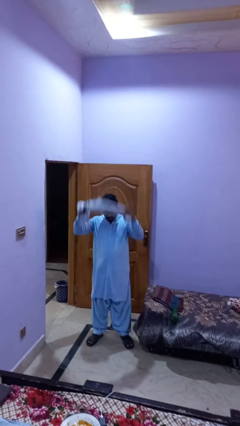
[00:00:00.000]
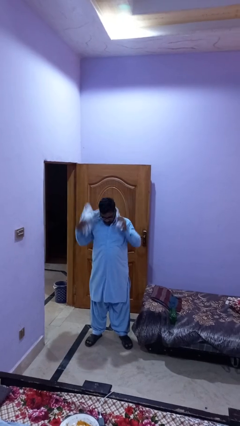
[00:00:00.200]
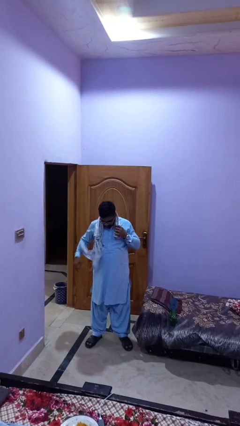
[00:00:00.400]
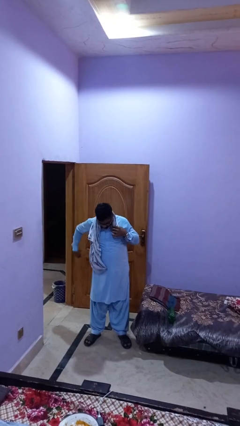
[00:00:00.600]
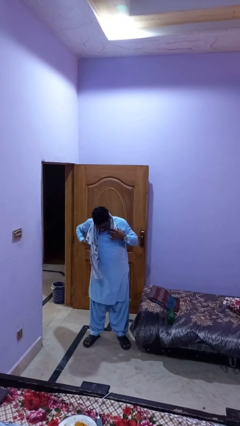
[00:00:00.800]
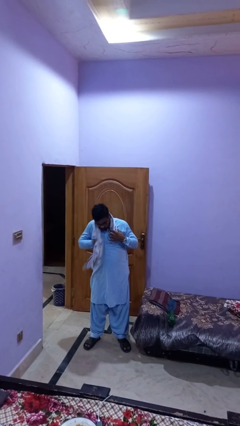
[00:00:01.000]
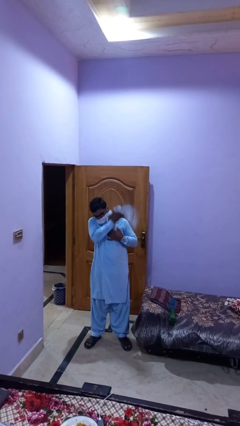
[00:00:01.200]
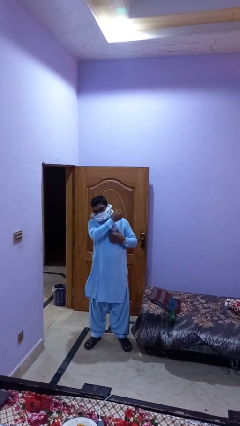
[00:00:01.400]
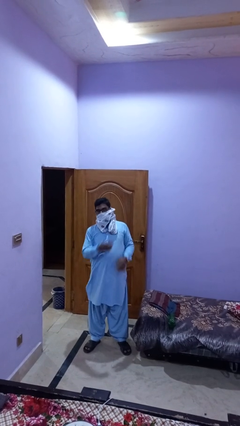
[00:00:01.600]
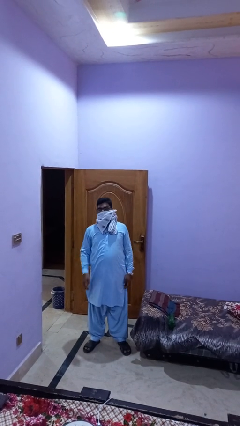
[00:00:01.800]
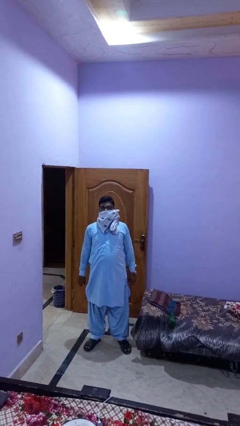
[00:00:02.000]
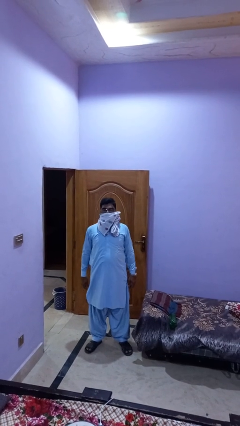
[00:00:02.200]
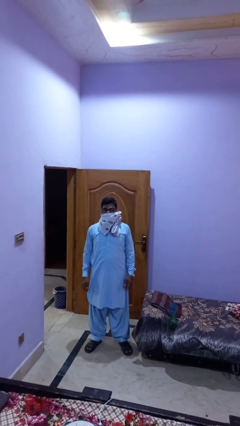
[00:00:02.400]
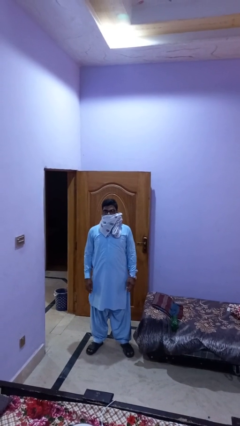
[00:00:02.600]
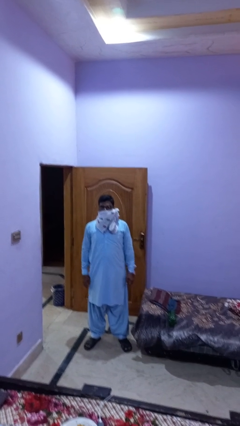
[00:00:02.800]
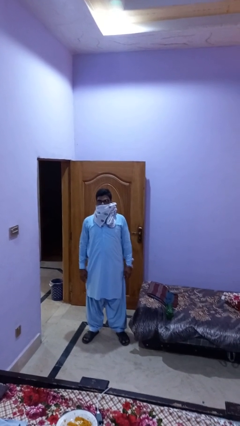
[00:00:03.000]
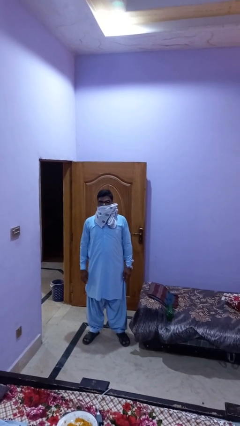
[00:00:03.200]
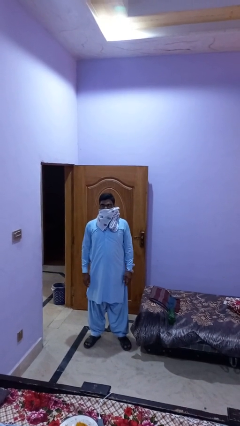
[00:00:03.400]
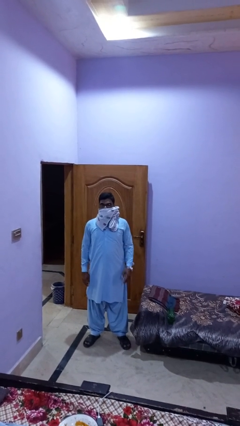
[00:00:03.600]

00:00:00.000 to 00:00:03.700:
person puts on scarf

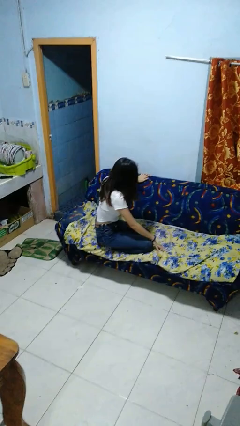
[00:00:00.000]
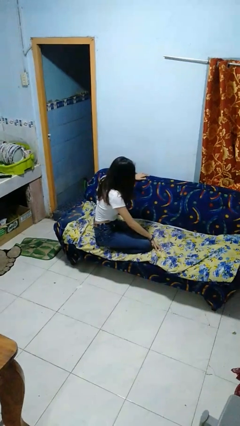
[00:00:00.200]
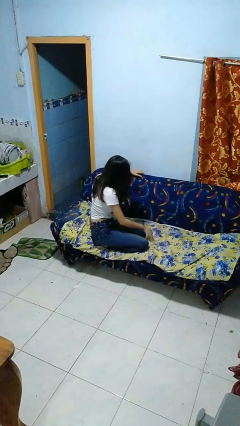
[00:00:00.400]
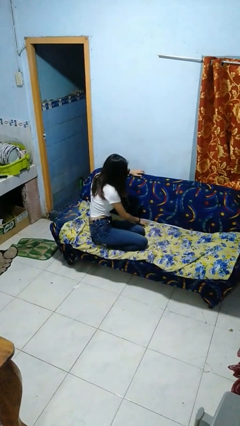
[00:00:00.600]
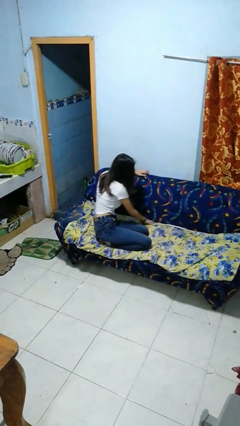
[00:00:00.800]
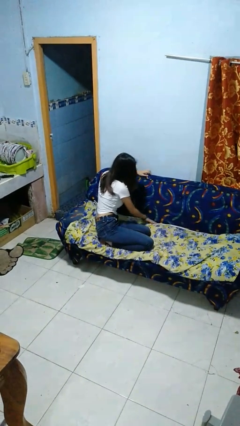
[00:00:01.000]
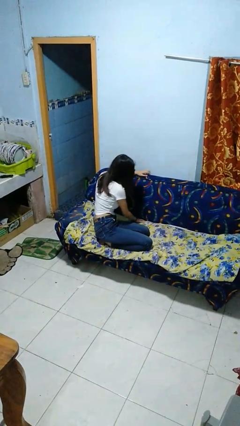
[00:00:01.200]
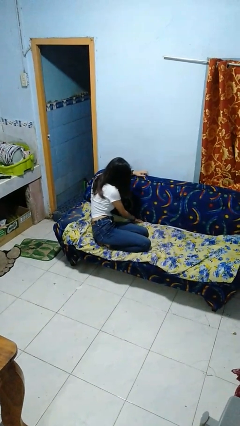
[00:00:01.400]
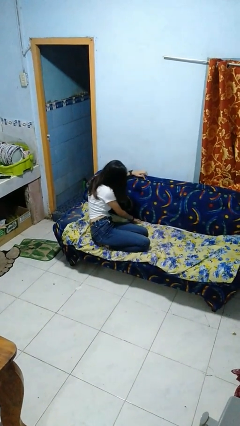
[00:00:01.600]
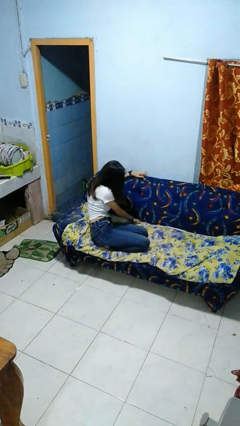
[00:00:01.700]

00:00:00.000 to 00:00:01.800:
person searches in couch

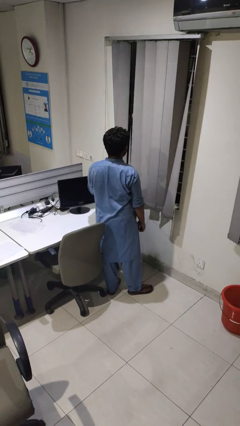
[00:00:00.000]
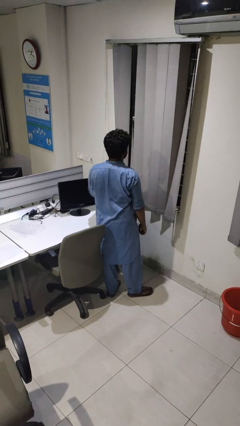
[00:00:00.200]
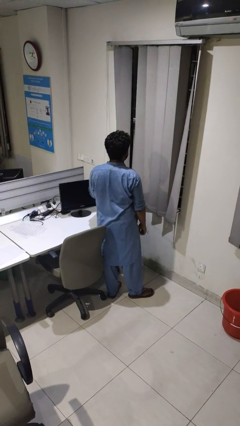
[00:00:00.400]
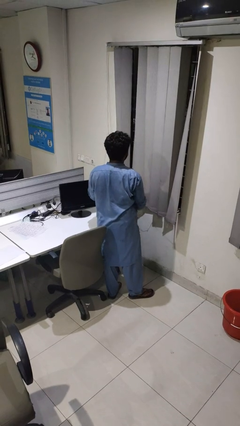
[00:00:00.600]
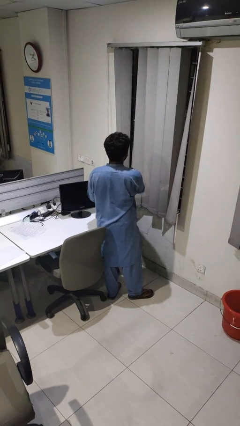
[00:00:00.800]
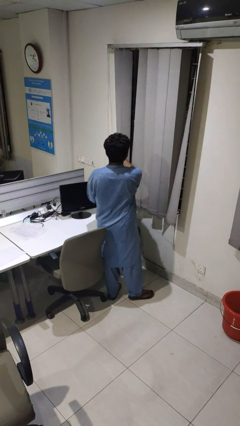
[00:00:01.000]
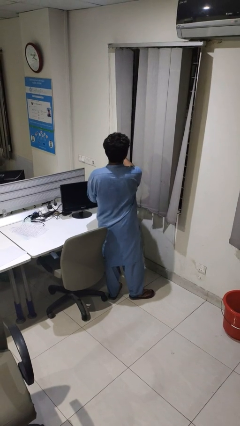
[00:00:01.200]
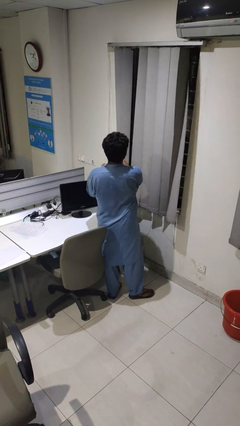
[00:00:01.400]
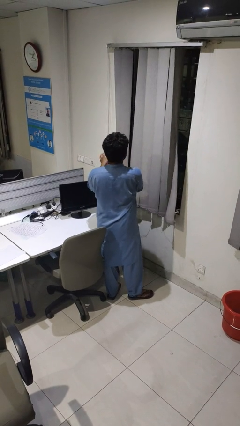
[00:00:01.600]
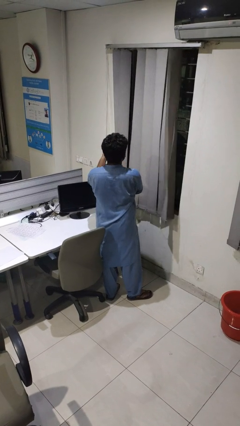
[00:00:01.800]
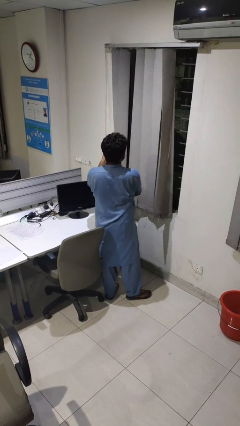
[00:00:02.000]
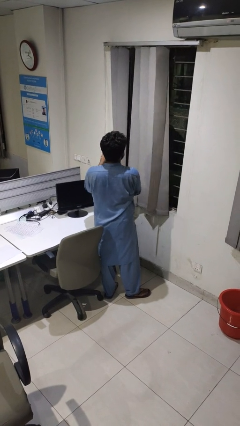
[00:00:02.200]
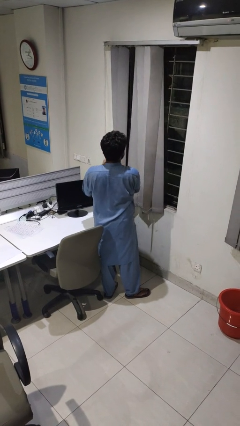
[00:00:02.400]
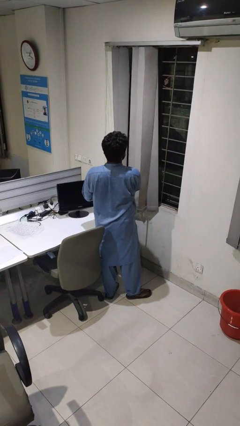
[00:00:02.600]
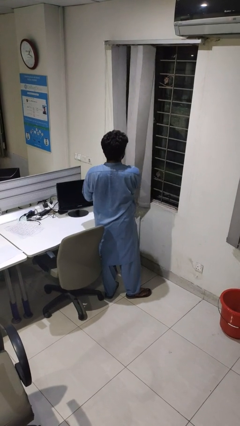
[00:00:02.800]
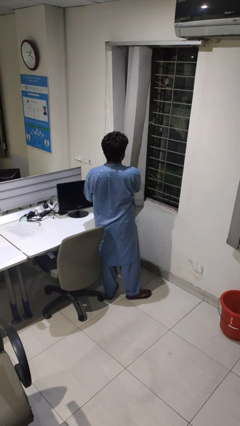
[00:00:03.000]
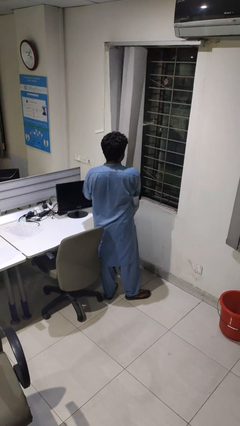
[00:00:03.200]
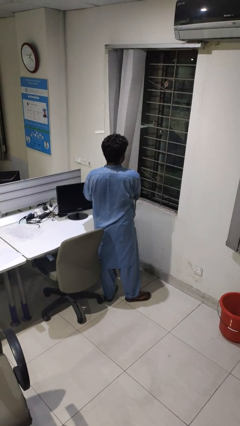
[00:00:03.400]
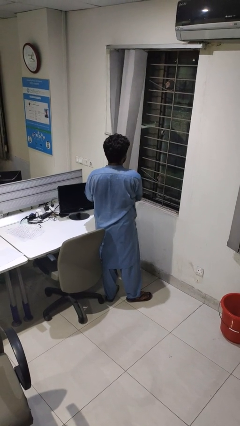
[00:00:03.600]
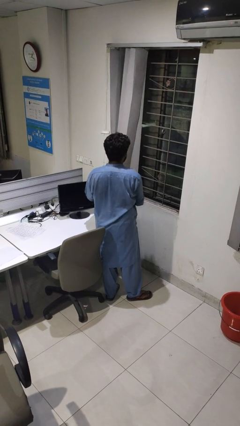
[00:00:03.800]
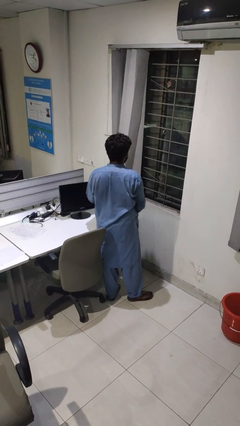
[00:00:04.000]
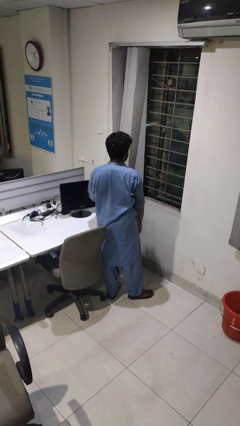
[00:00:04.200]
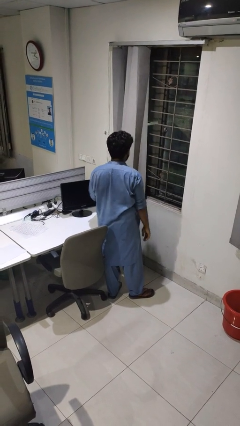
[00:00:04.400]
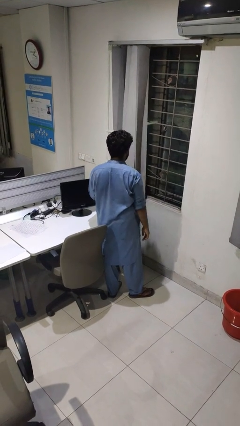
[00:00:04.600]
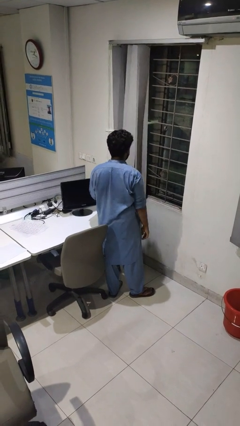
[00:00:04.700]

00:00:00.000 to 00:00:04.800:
person opens curtains

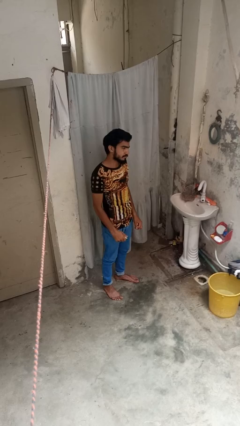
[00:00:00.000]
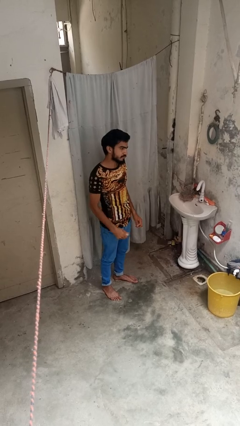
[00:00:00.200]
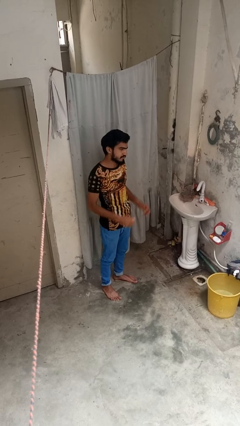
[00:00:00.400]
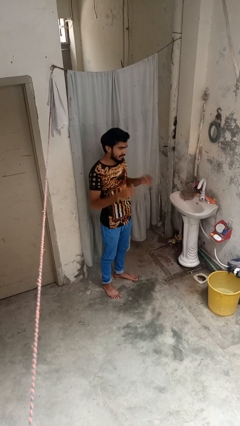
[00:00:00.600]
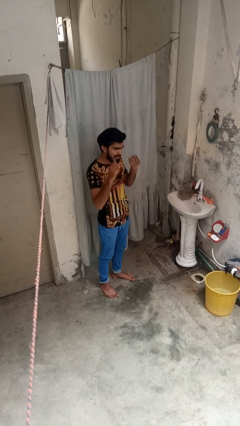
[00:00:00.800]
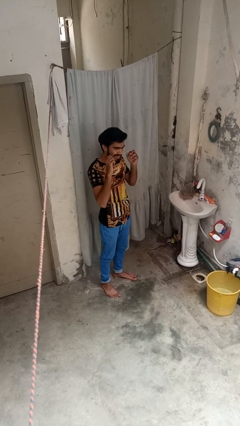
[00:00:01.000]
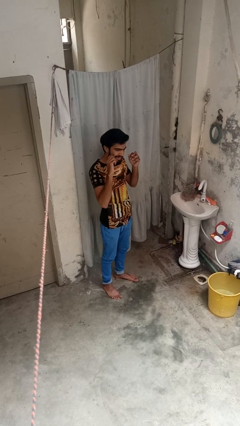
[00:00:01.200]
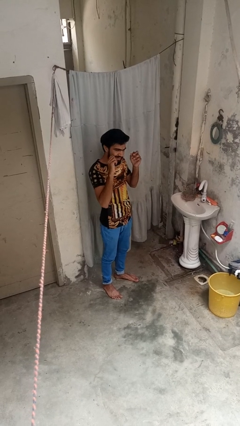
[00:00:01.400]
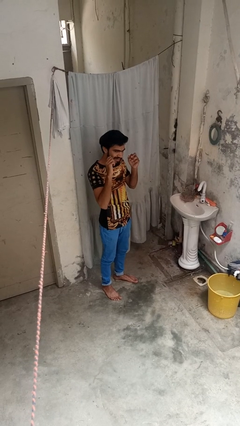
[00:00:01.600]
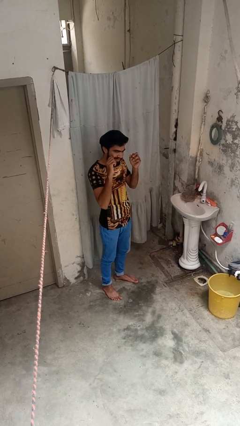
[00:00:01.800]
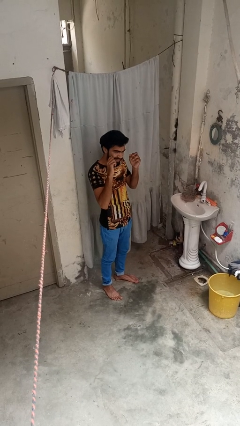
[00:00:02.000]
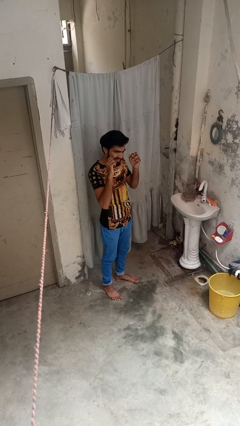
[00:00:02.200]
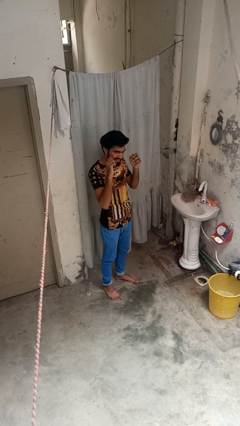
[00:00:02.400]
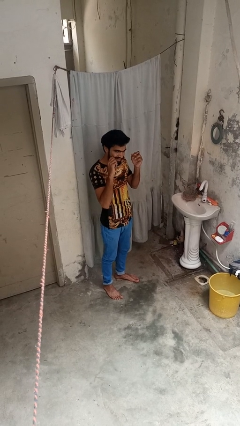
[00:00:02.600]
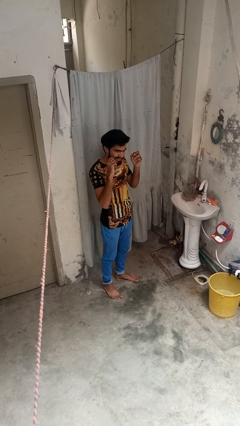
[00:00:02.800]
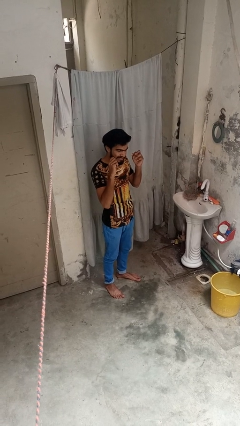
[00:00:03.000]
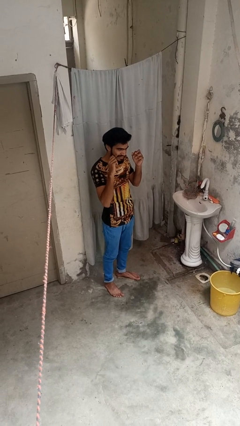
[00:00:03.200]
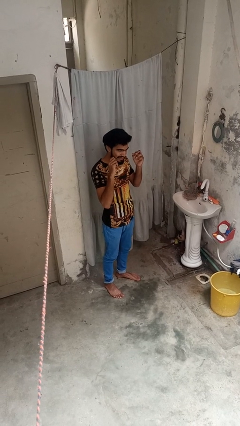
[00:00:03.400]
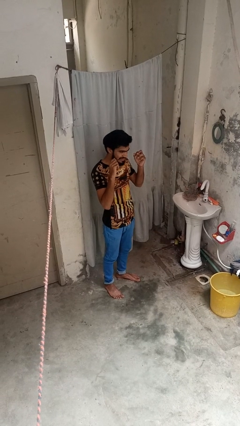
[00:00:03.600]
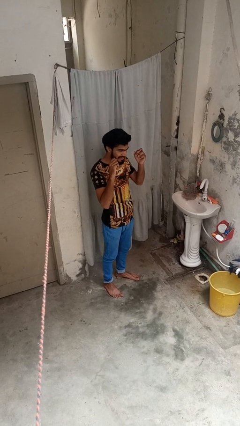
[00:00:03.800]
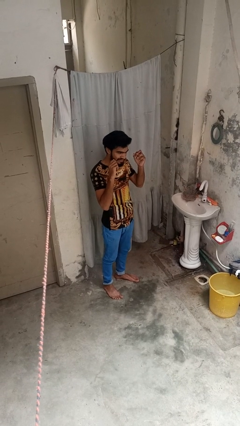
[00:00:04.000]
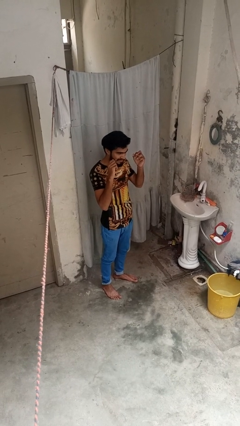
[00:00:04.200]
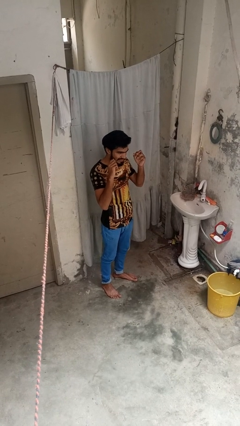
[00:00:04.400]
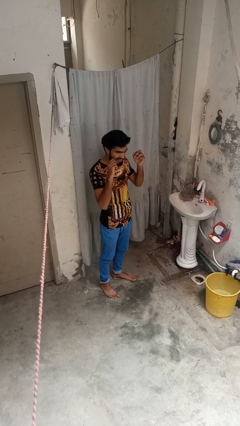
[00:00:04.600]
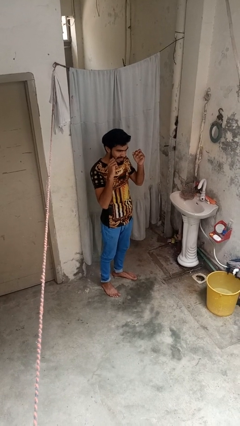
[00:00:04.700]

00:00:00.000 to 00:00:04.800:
person flosses

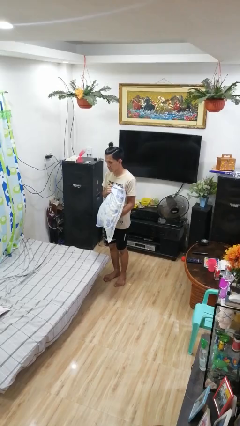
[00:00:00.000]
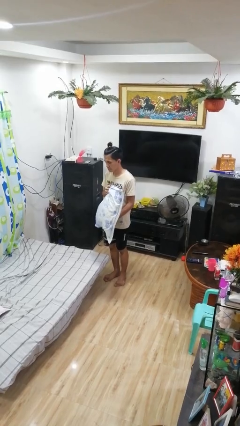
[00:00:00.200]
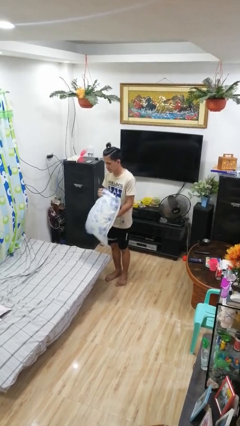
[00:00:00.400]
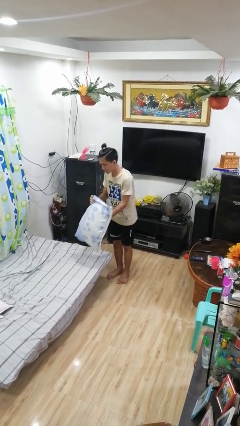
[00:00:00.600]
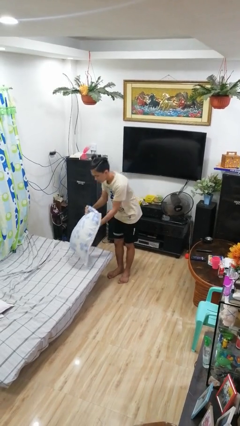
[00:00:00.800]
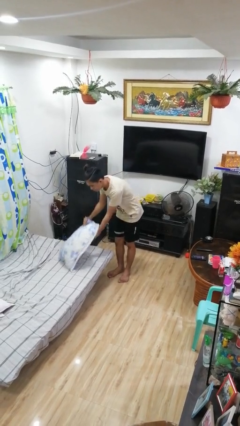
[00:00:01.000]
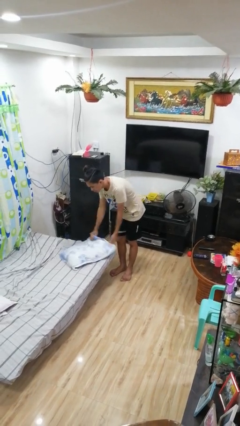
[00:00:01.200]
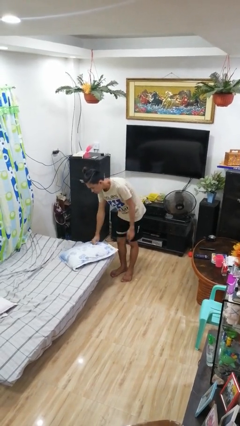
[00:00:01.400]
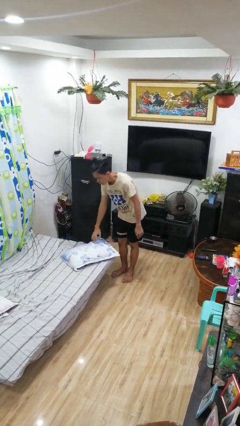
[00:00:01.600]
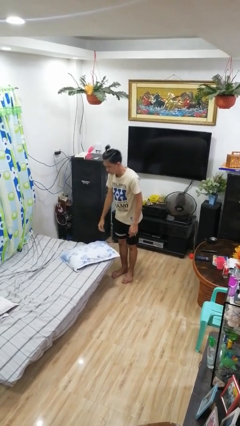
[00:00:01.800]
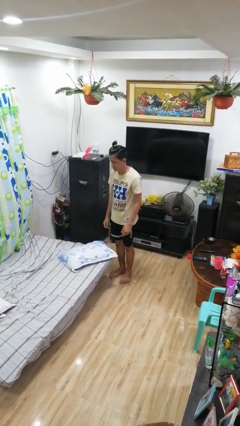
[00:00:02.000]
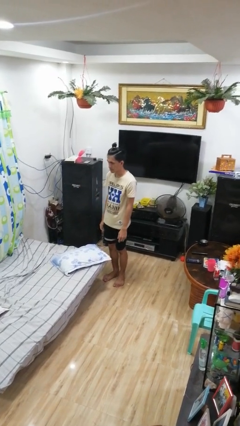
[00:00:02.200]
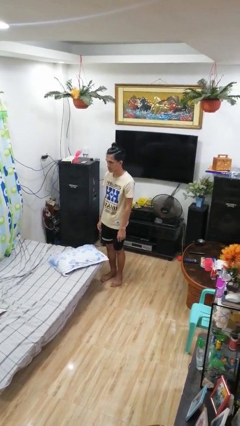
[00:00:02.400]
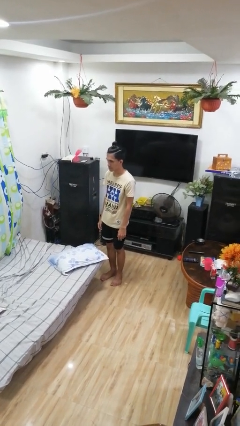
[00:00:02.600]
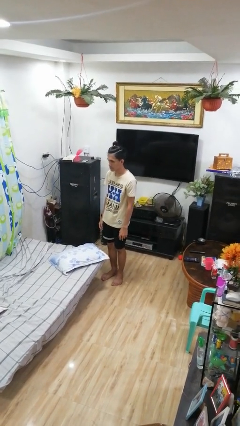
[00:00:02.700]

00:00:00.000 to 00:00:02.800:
person puts down object on bed
